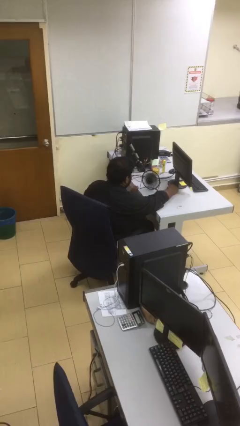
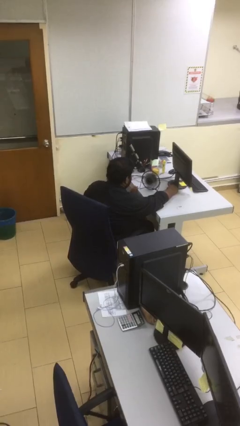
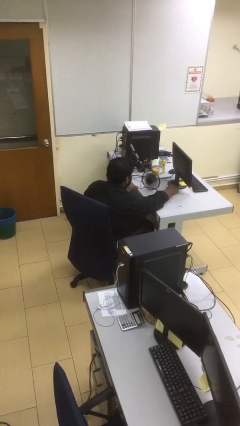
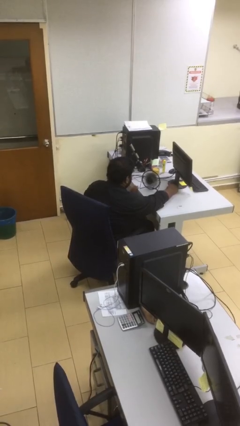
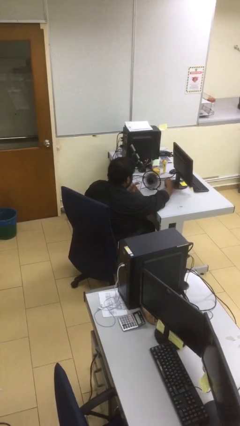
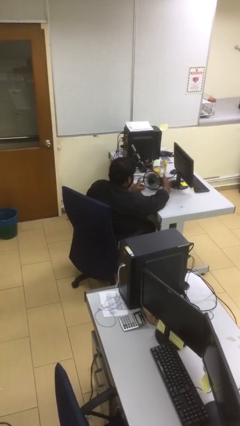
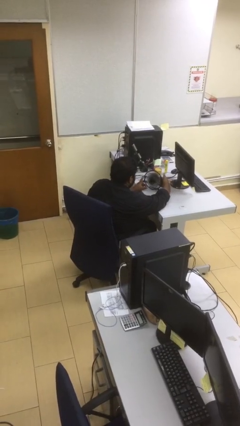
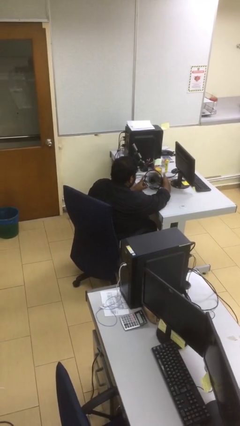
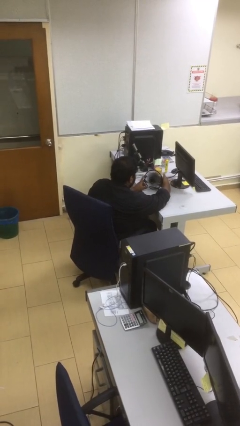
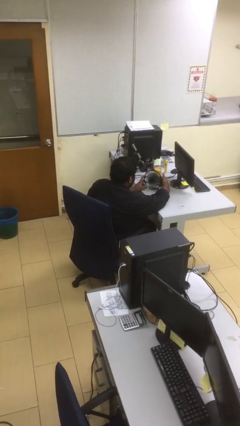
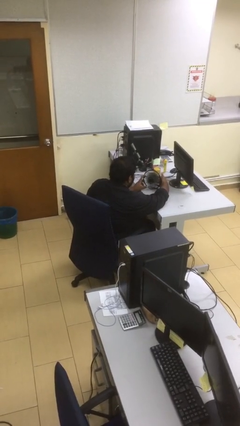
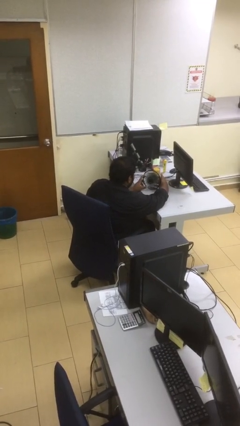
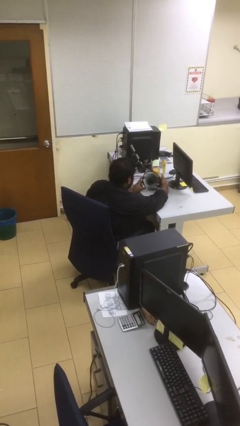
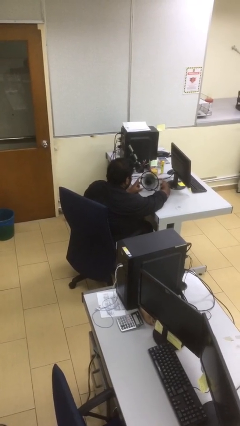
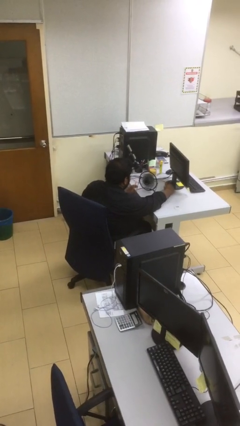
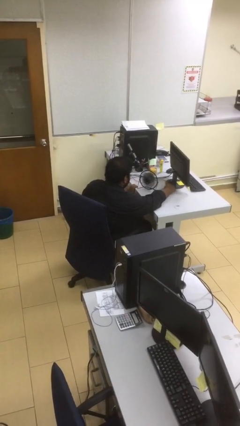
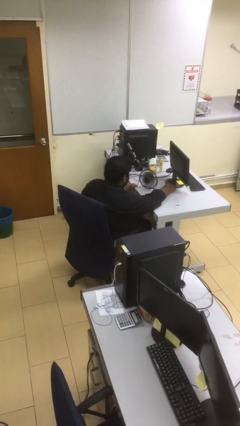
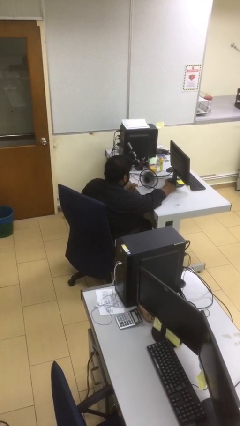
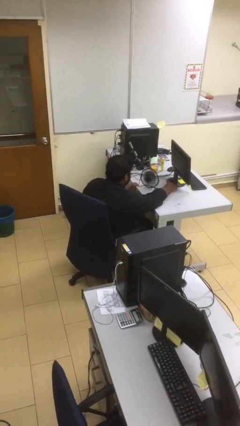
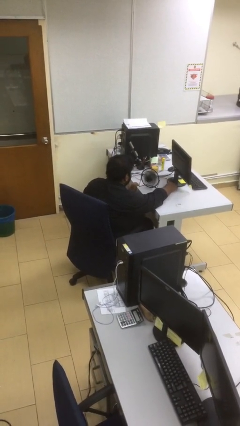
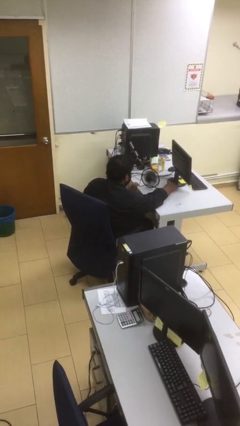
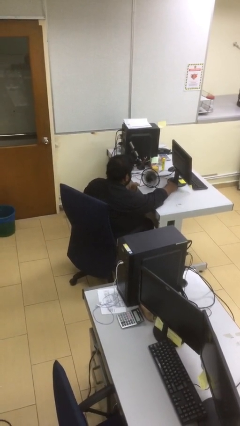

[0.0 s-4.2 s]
person turns off fan

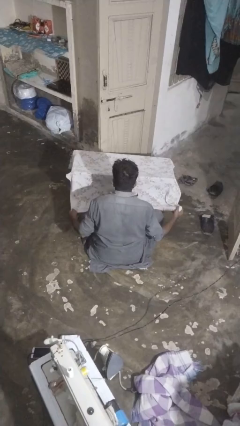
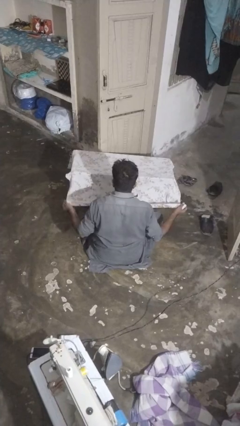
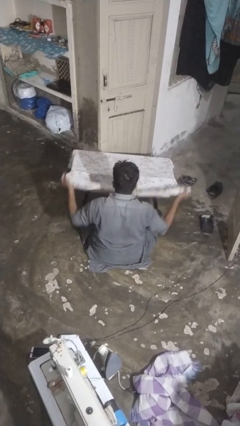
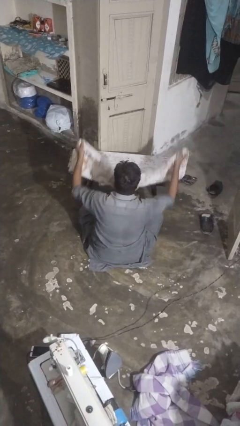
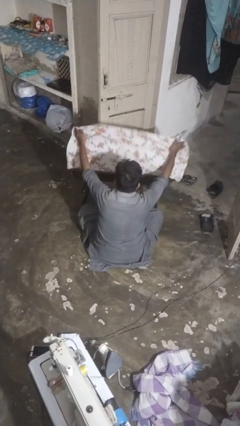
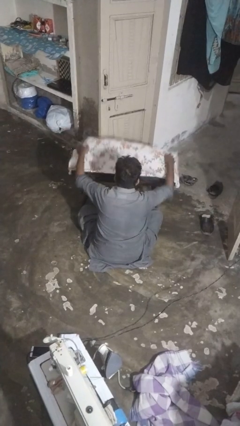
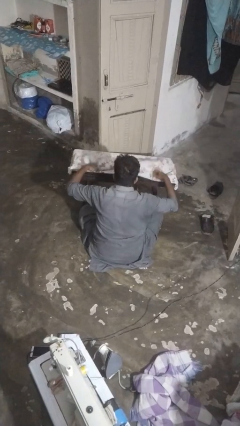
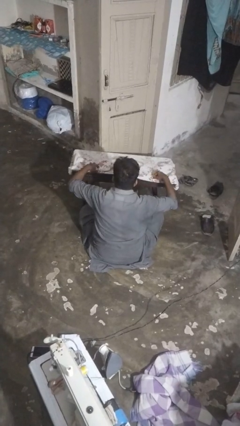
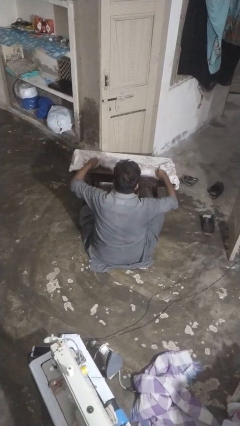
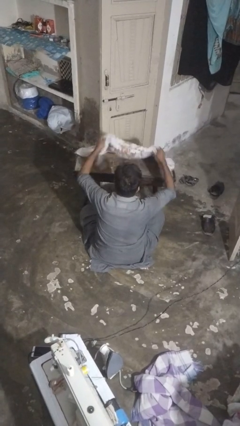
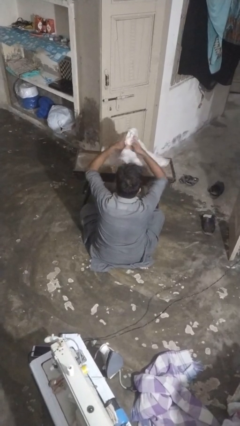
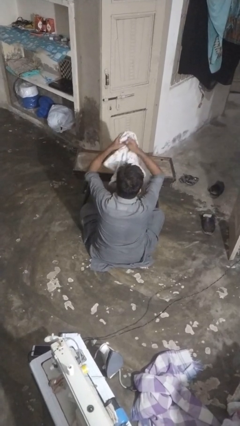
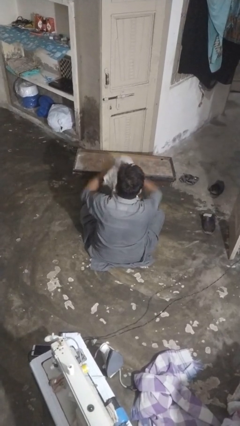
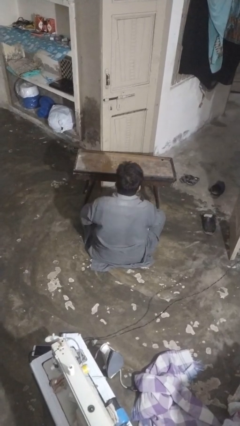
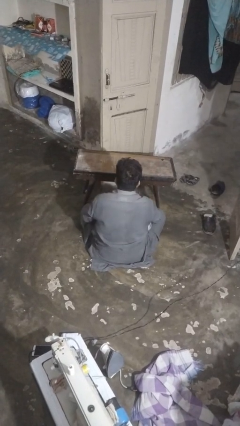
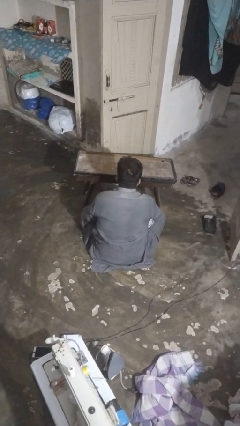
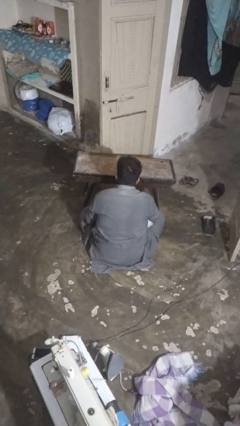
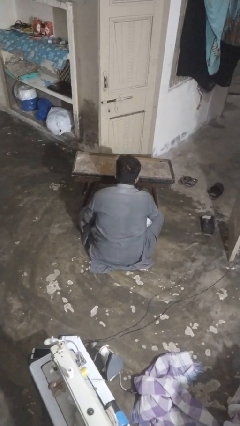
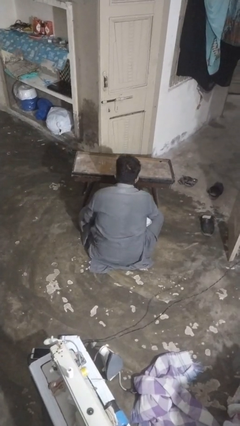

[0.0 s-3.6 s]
person folds tablecloth

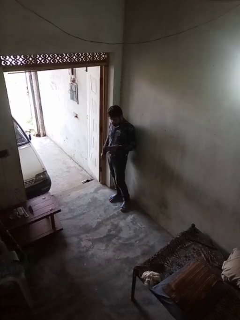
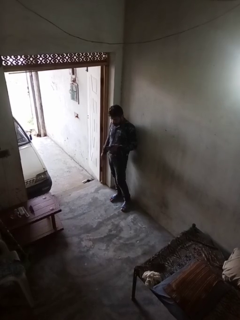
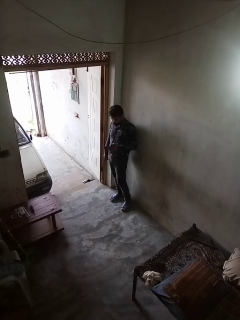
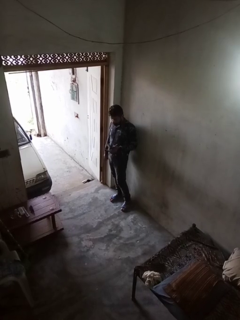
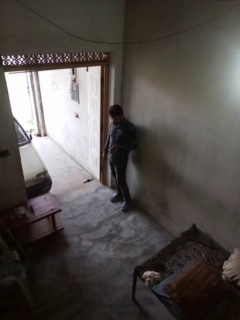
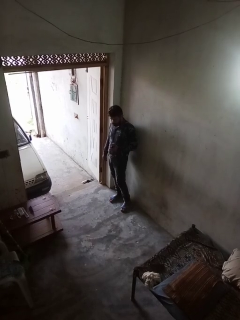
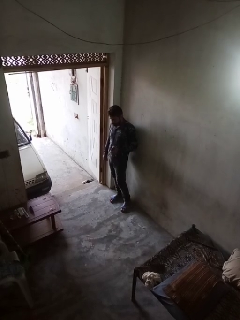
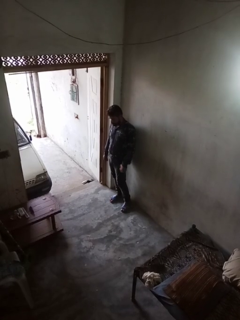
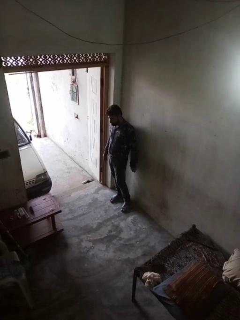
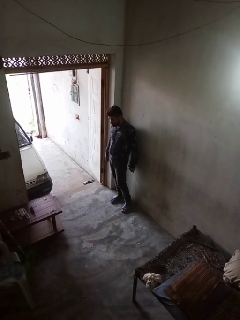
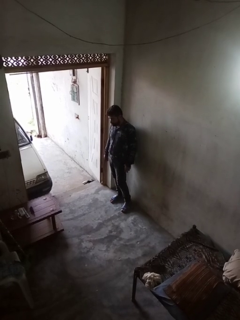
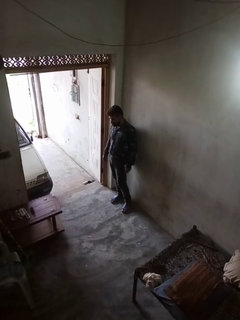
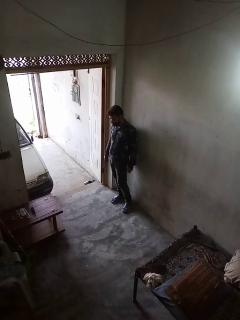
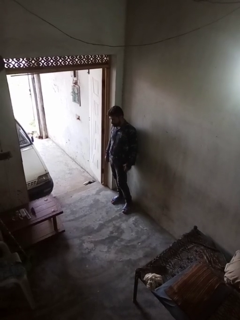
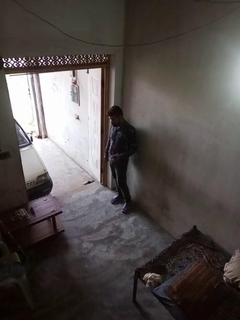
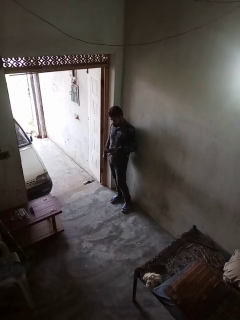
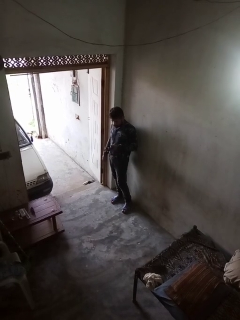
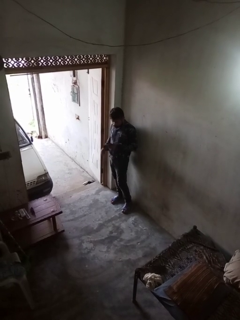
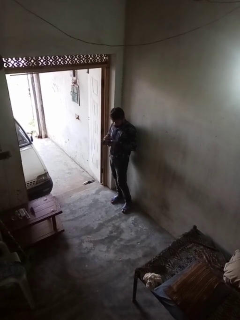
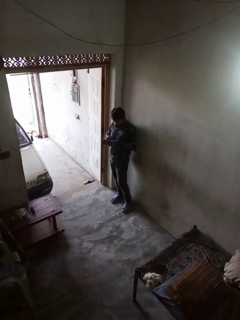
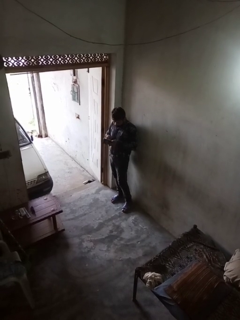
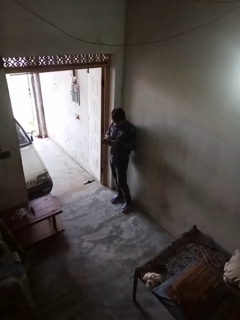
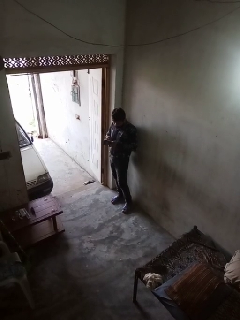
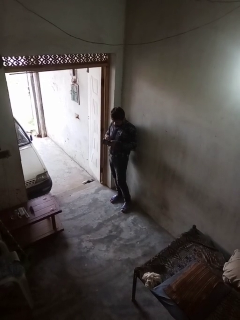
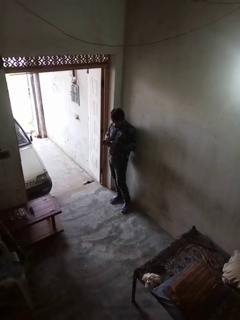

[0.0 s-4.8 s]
person searches in purse

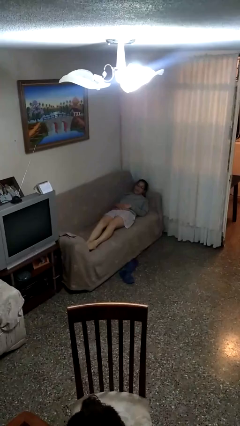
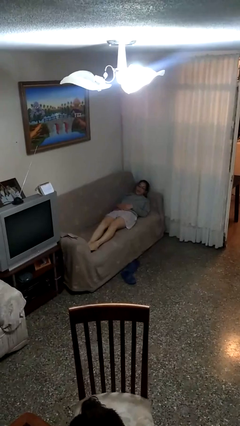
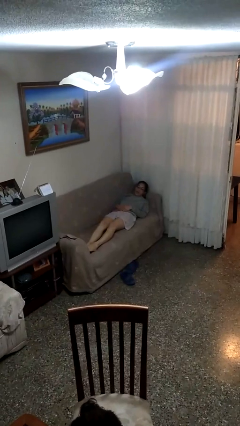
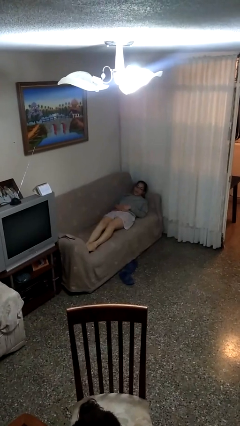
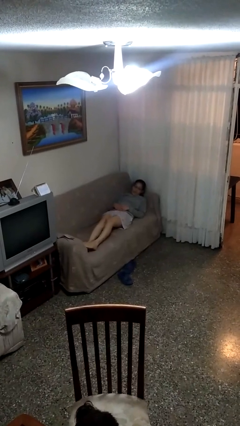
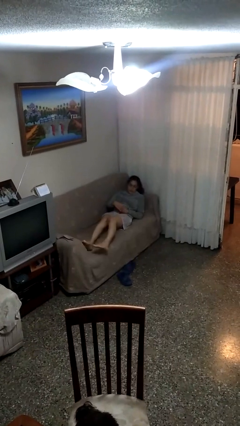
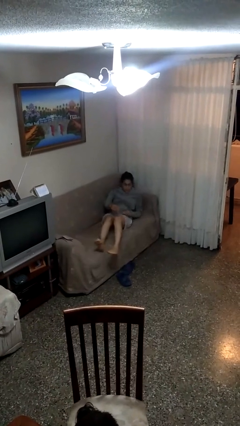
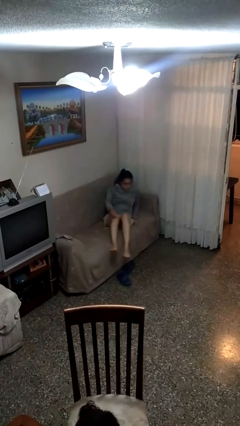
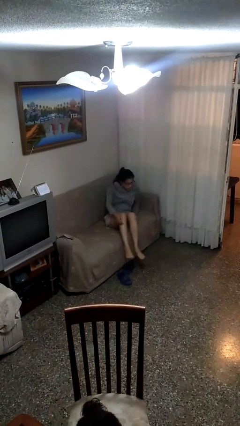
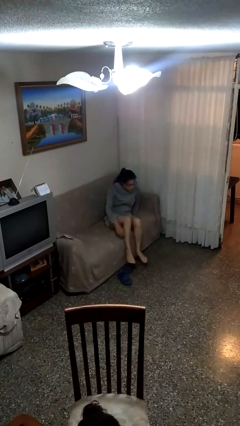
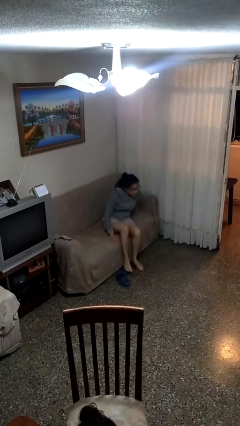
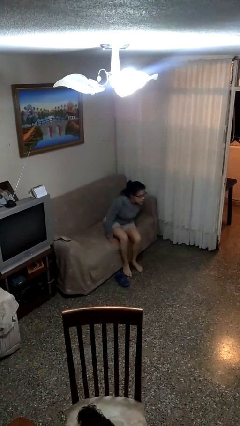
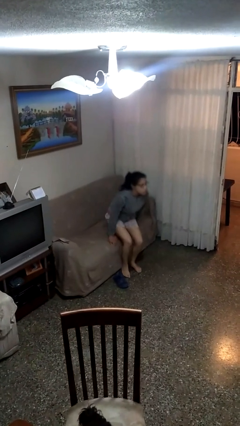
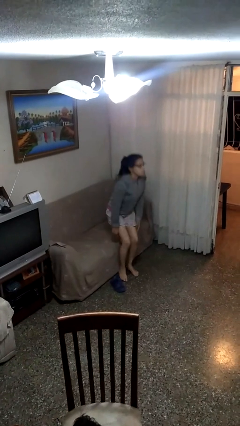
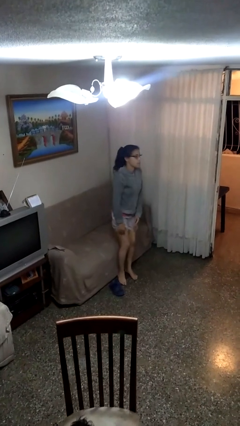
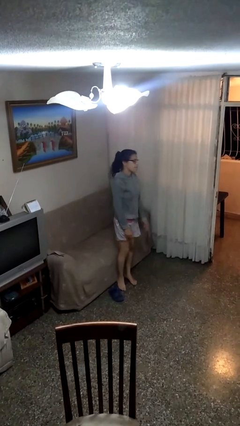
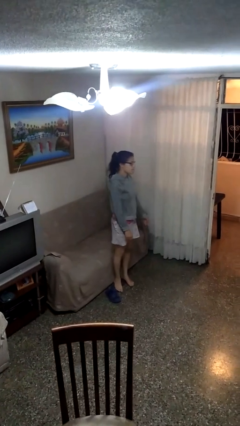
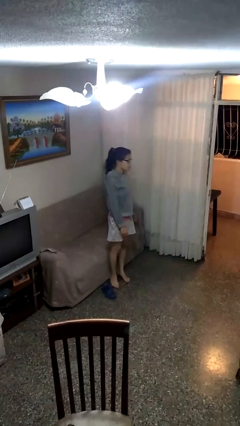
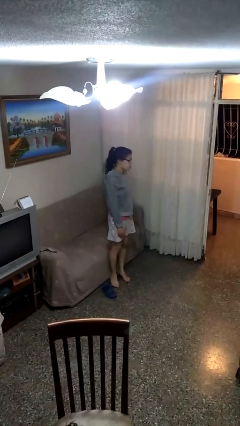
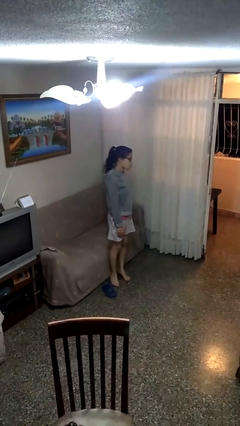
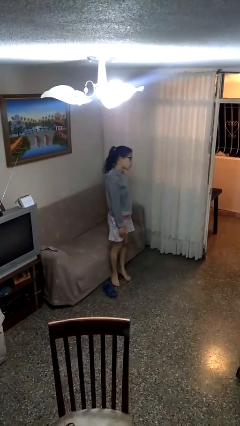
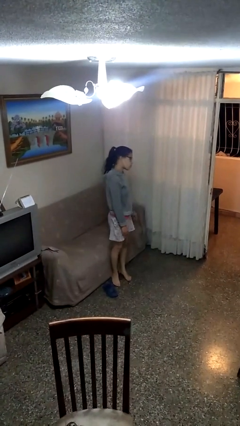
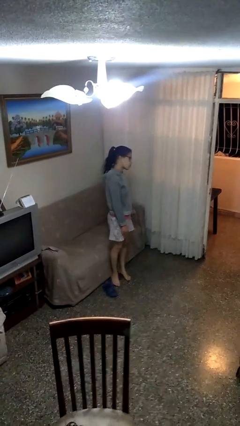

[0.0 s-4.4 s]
person stands up

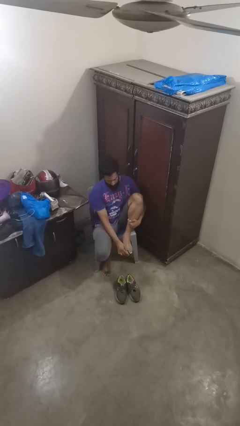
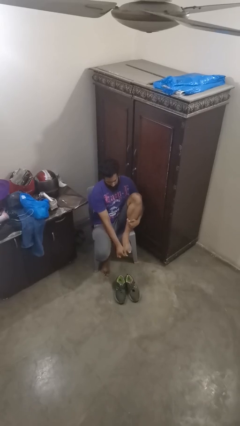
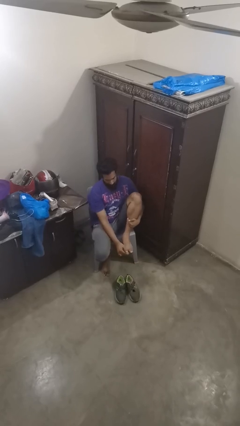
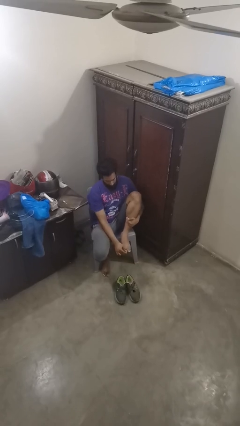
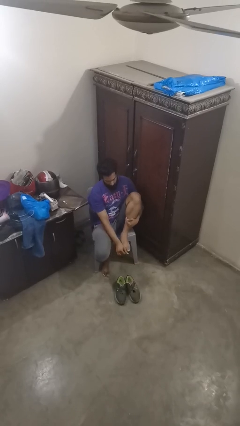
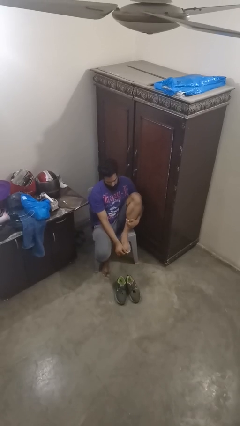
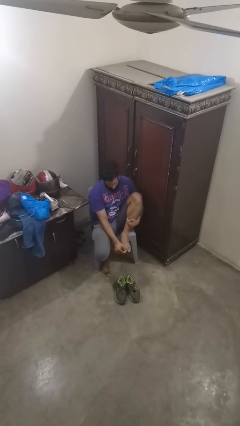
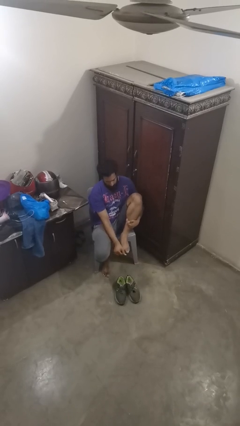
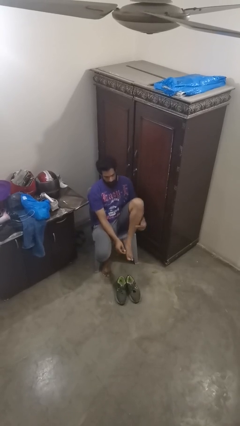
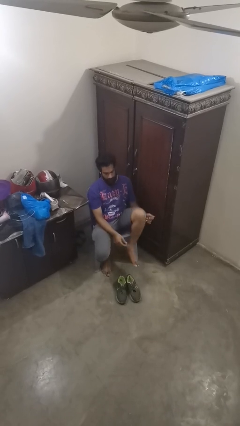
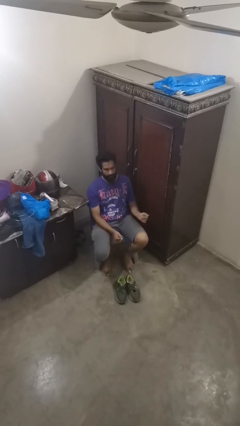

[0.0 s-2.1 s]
person rubs foot
